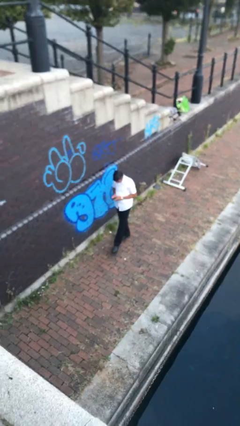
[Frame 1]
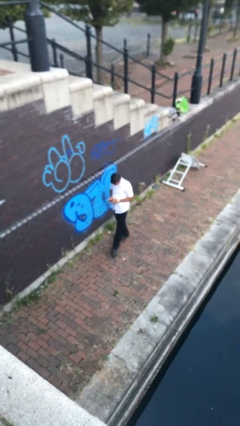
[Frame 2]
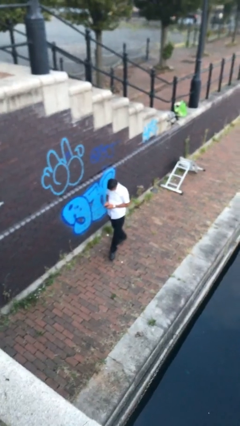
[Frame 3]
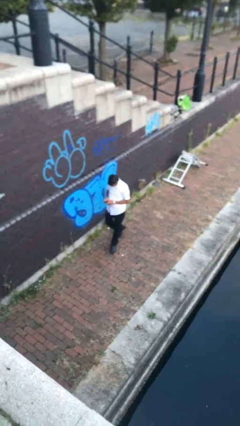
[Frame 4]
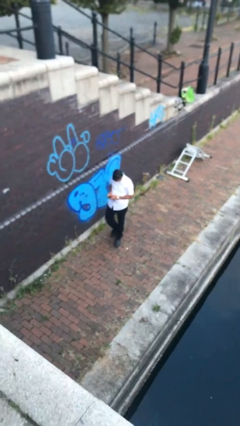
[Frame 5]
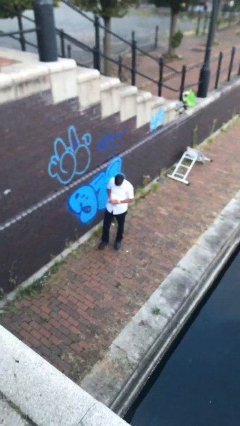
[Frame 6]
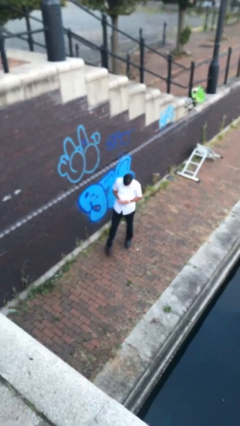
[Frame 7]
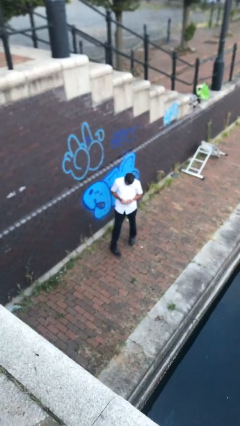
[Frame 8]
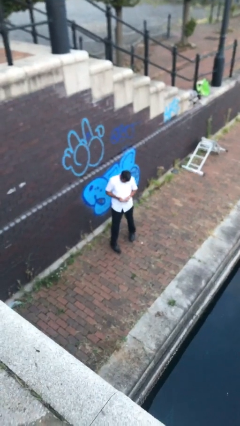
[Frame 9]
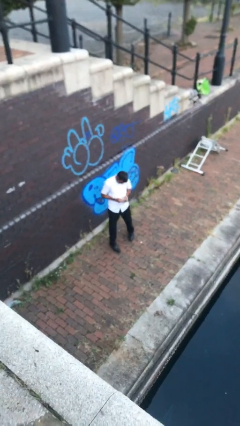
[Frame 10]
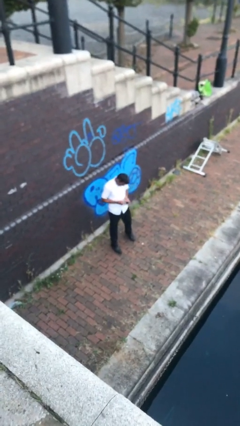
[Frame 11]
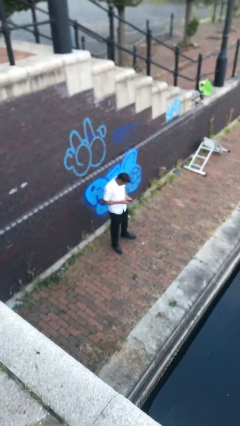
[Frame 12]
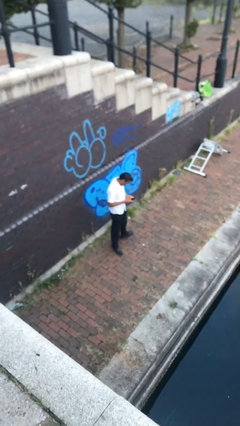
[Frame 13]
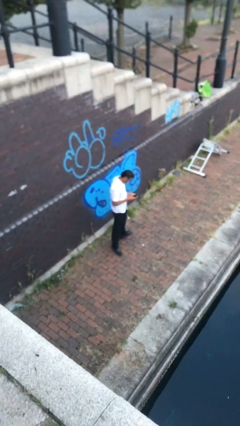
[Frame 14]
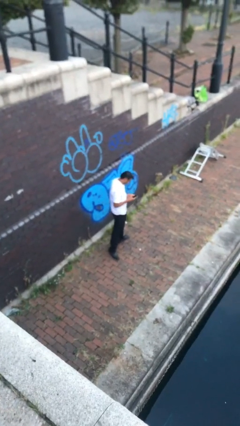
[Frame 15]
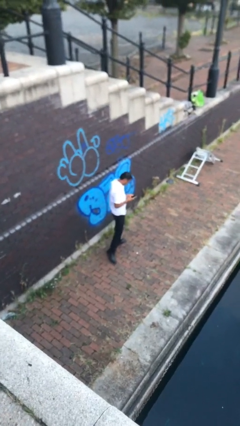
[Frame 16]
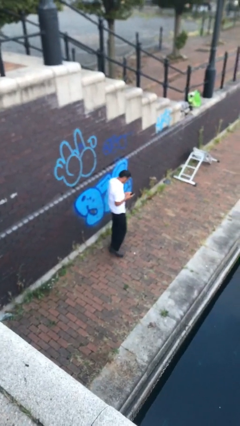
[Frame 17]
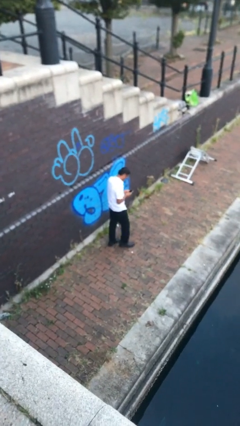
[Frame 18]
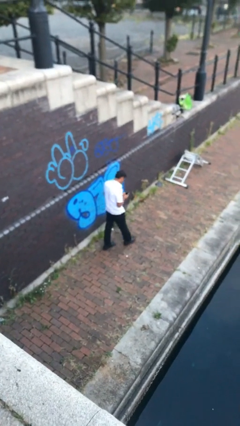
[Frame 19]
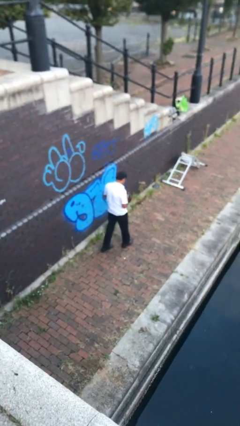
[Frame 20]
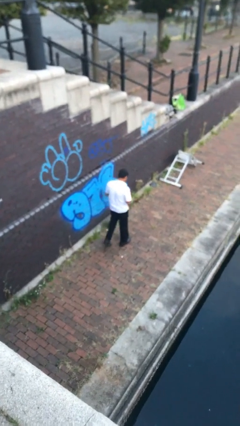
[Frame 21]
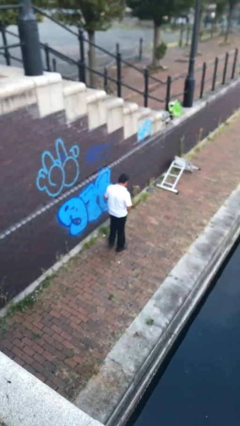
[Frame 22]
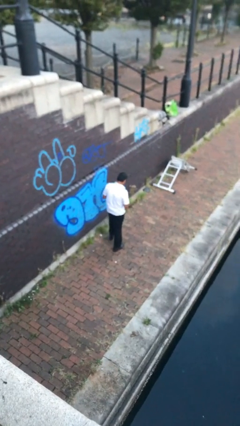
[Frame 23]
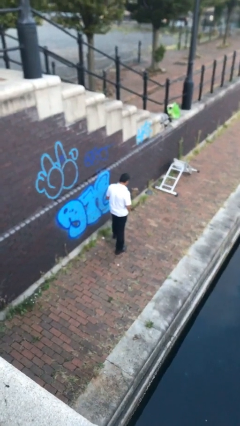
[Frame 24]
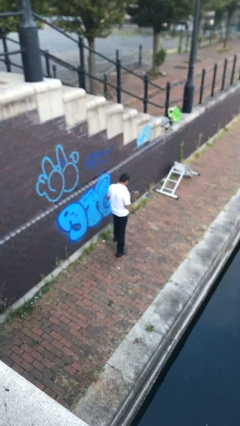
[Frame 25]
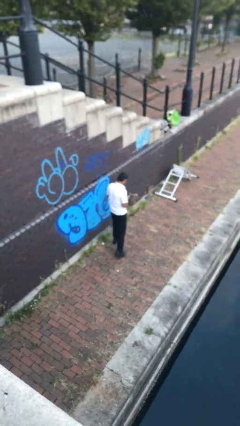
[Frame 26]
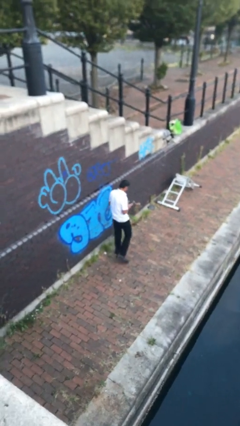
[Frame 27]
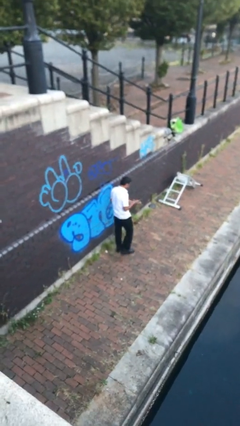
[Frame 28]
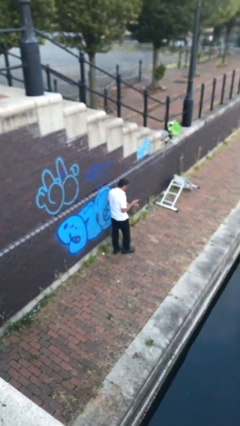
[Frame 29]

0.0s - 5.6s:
person texts on phone

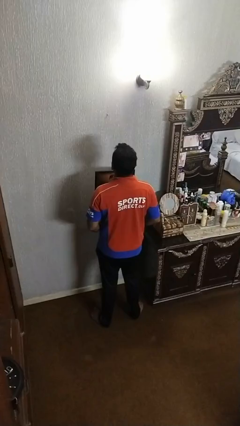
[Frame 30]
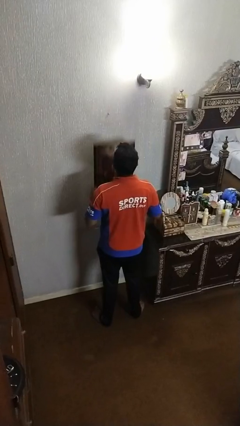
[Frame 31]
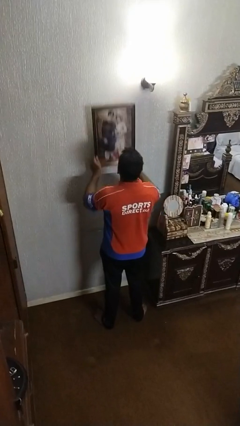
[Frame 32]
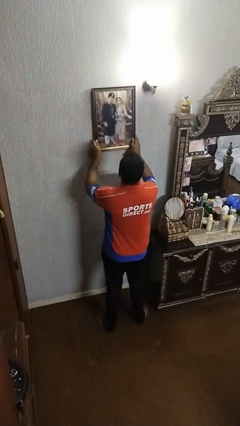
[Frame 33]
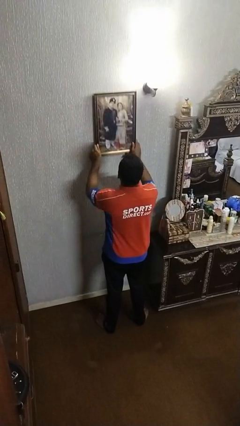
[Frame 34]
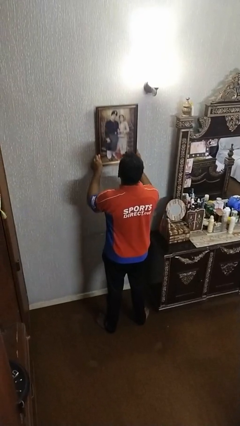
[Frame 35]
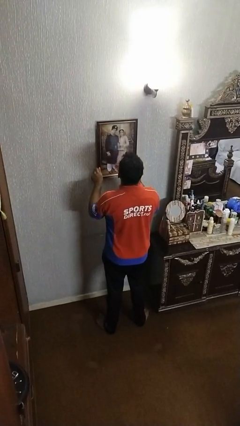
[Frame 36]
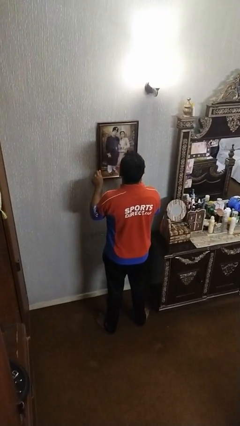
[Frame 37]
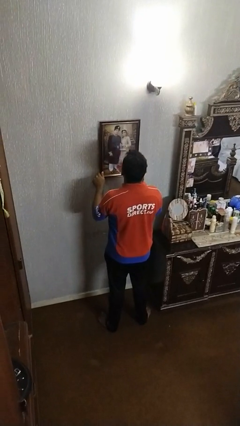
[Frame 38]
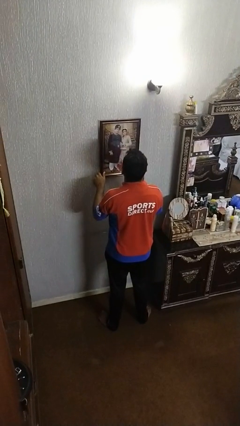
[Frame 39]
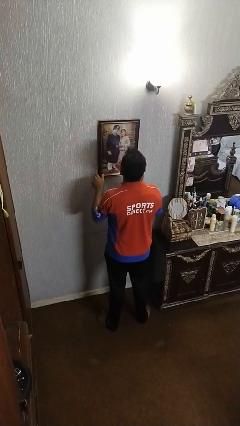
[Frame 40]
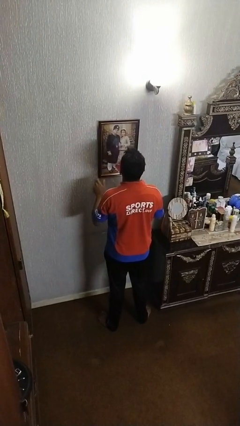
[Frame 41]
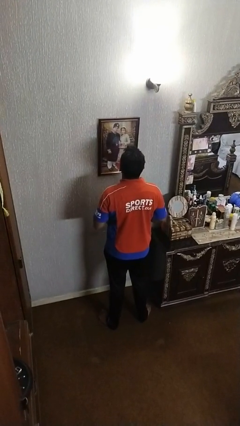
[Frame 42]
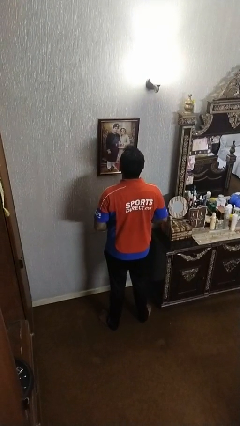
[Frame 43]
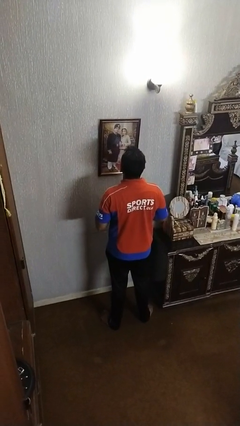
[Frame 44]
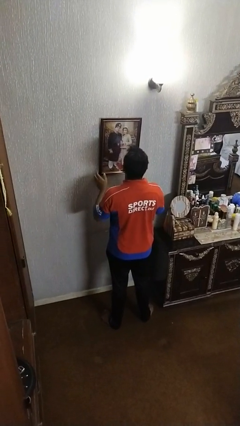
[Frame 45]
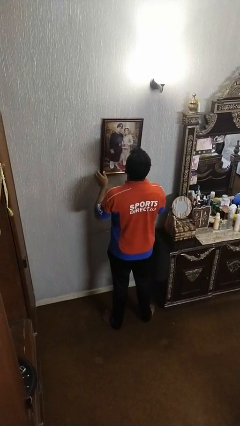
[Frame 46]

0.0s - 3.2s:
person puts up picture frame

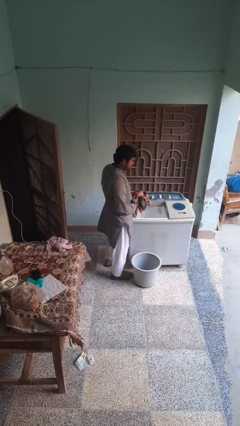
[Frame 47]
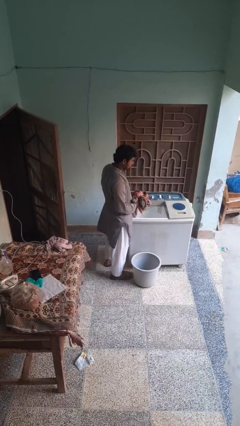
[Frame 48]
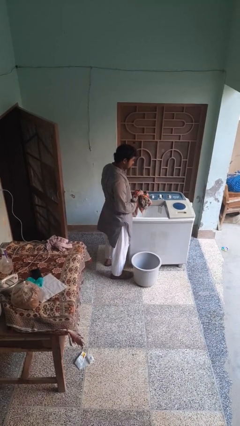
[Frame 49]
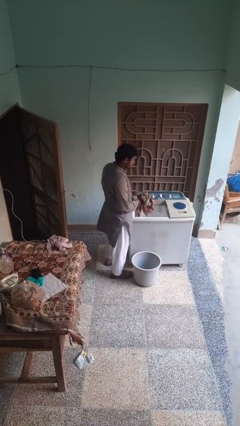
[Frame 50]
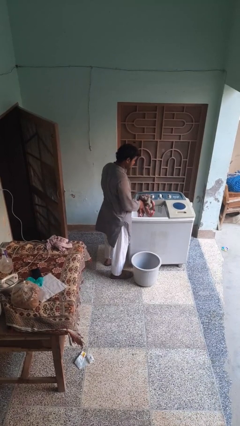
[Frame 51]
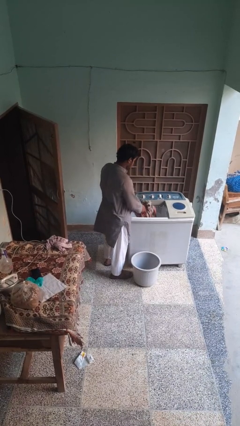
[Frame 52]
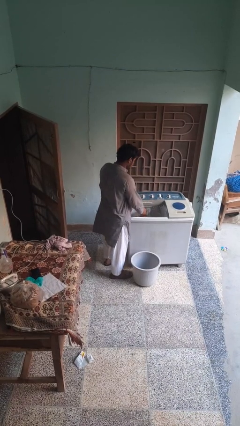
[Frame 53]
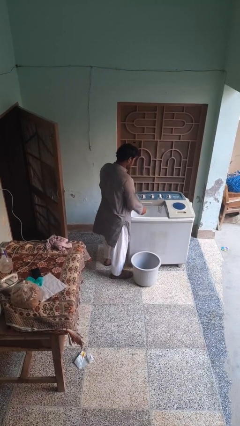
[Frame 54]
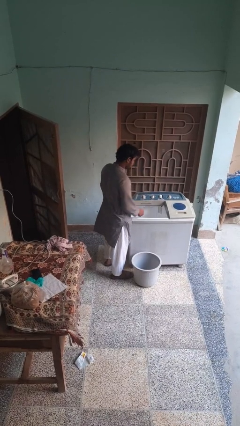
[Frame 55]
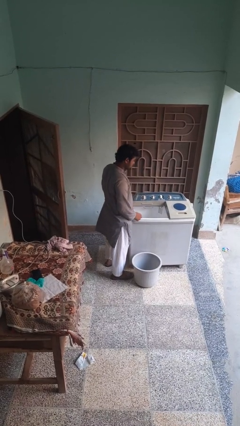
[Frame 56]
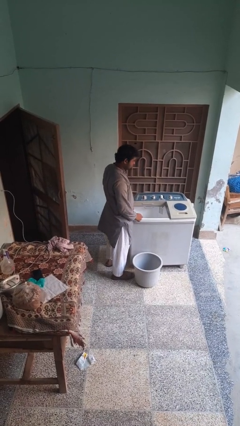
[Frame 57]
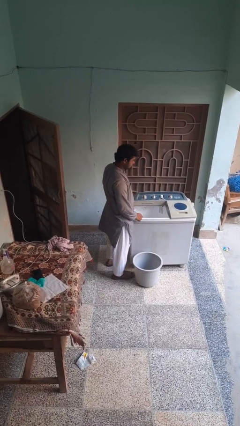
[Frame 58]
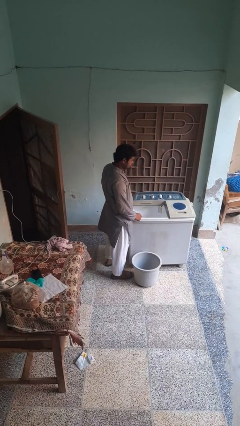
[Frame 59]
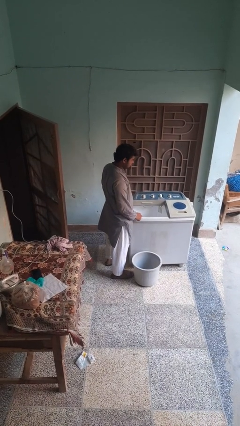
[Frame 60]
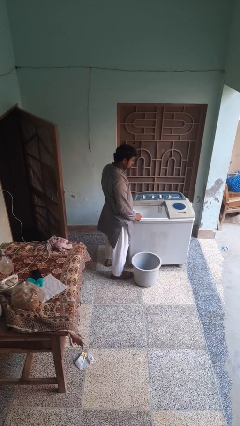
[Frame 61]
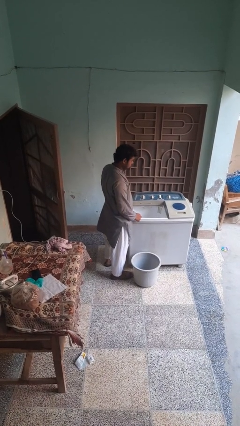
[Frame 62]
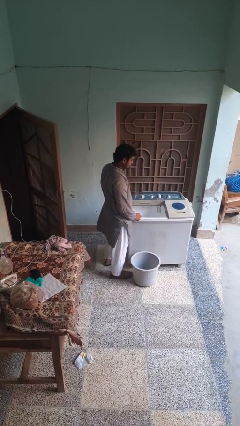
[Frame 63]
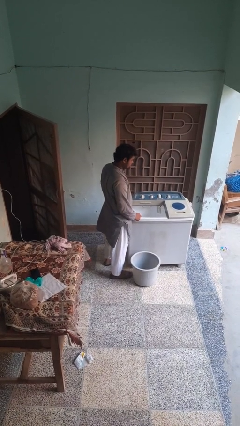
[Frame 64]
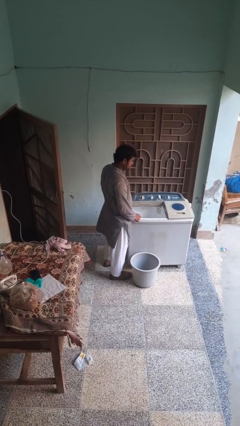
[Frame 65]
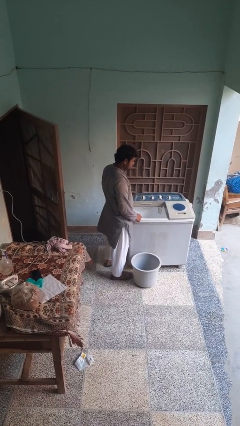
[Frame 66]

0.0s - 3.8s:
person loads clotheswasher

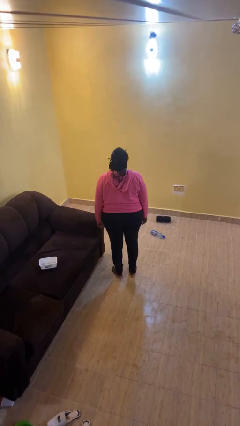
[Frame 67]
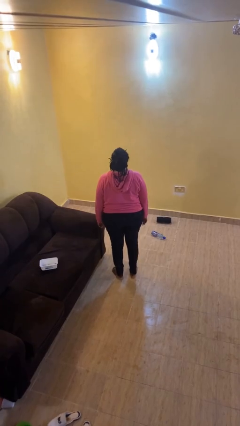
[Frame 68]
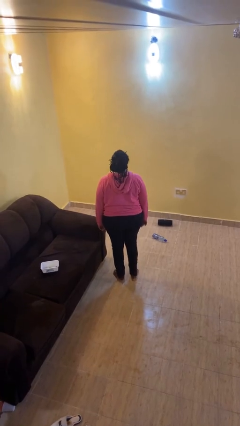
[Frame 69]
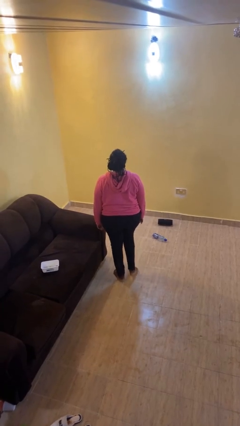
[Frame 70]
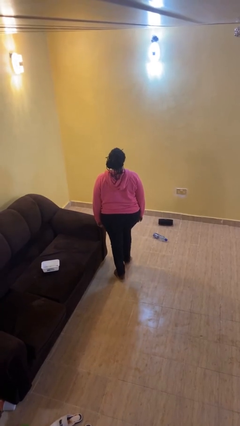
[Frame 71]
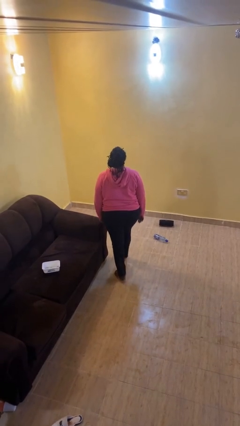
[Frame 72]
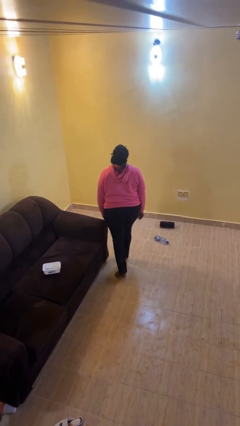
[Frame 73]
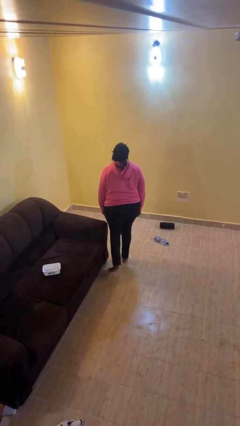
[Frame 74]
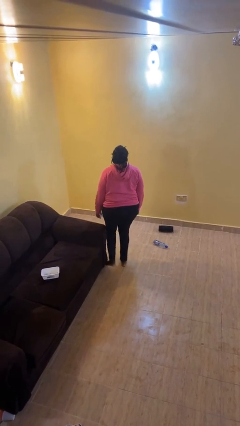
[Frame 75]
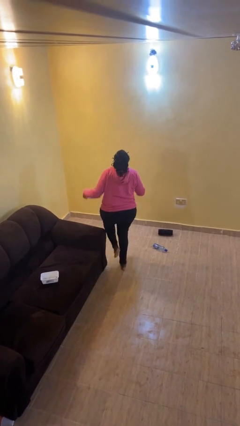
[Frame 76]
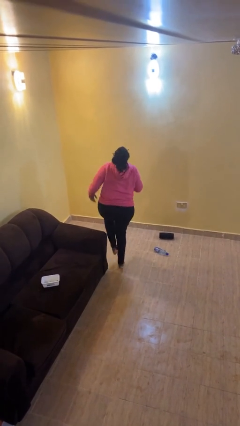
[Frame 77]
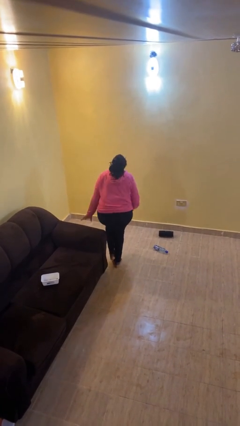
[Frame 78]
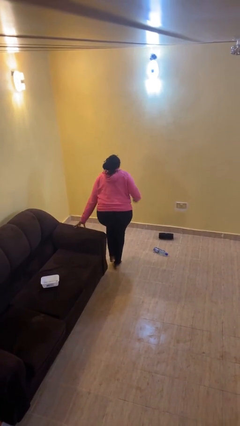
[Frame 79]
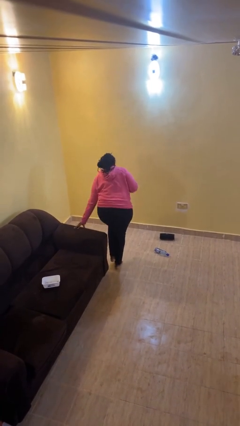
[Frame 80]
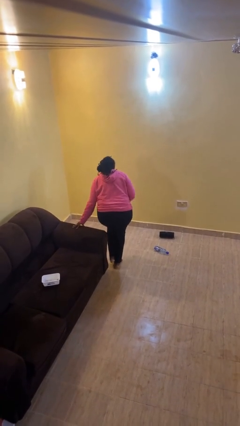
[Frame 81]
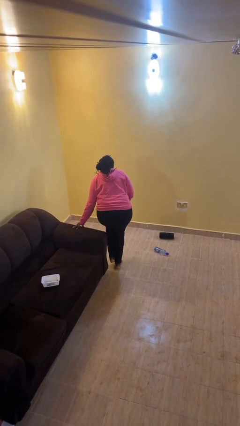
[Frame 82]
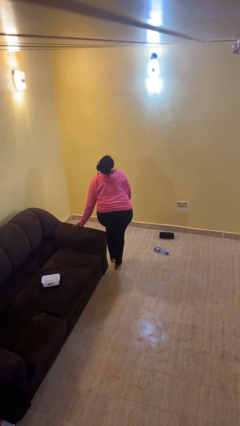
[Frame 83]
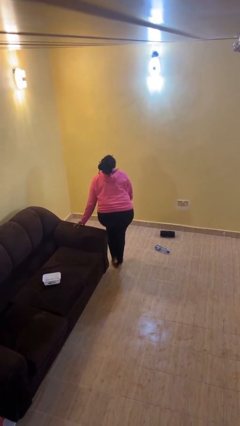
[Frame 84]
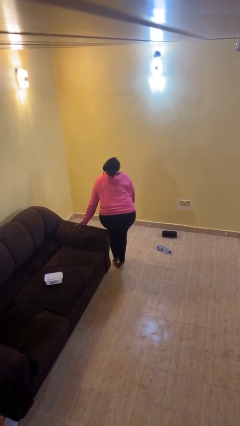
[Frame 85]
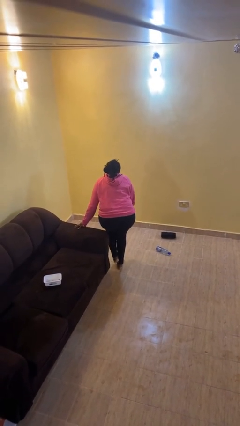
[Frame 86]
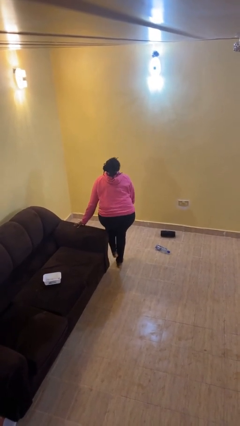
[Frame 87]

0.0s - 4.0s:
person stubs toe

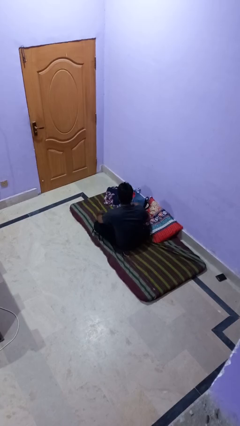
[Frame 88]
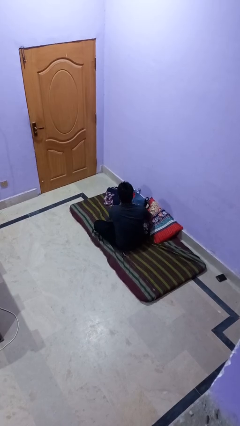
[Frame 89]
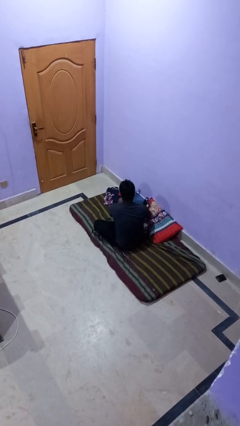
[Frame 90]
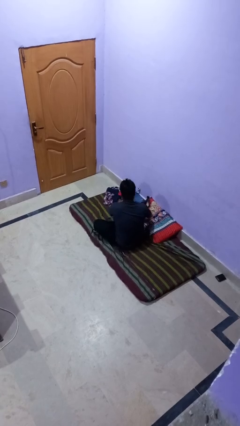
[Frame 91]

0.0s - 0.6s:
person folds pants
